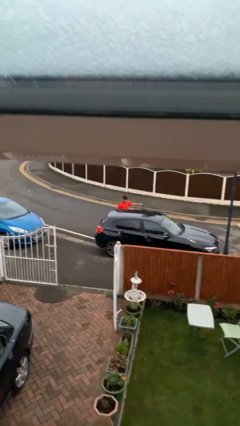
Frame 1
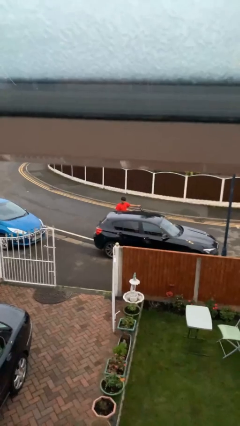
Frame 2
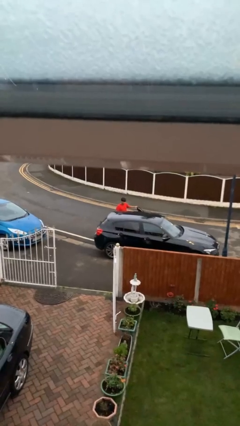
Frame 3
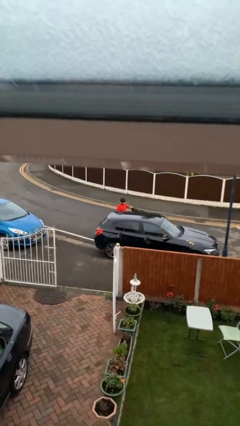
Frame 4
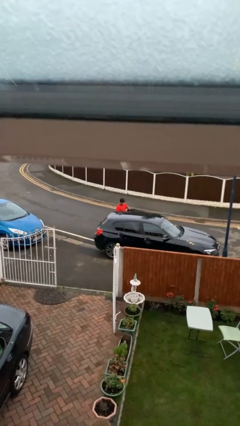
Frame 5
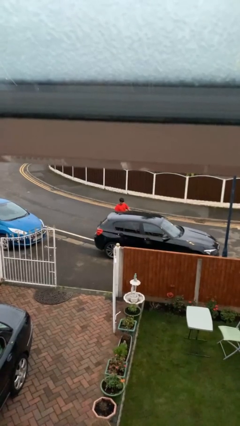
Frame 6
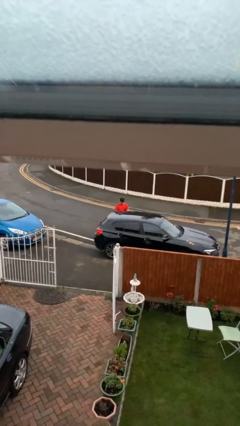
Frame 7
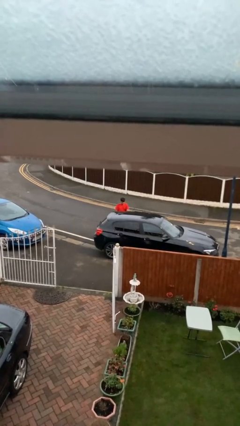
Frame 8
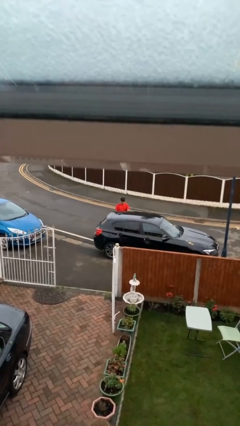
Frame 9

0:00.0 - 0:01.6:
person closes car door

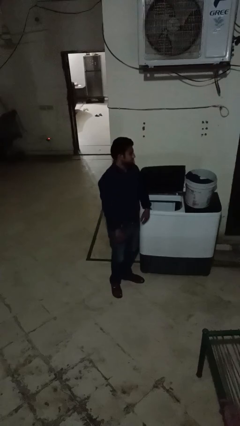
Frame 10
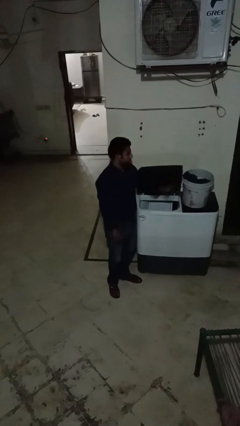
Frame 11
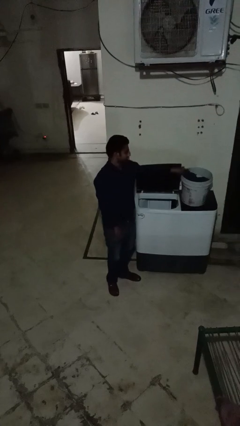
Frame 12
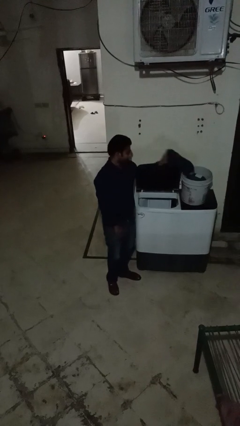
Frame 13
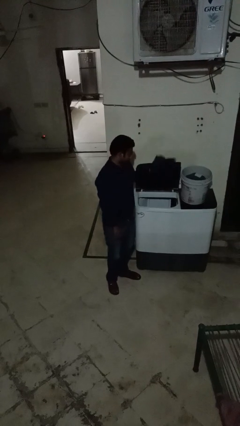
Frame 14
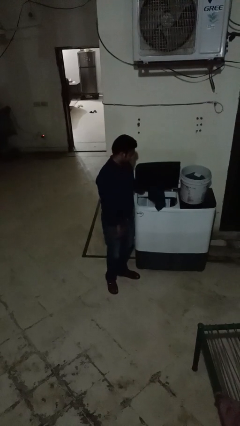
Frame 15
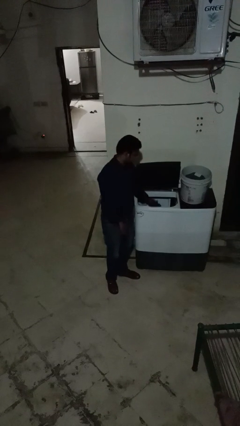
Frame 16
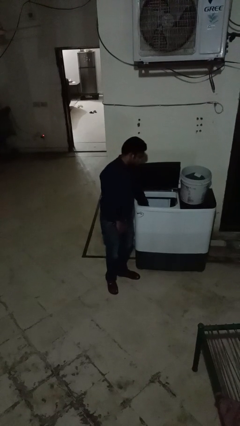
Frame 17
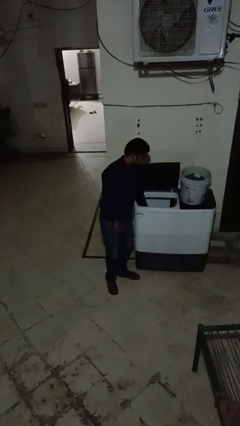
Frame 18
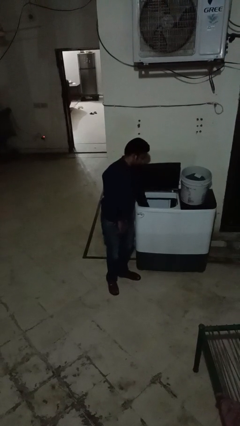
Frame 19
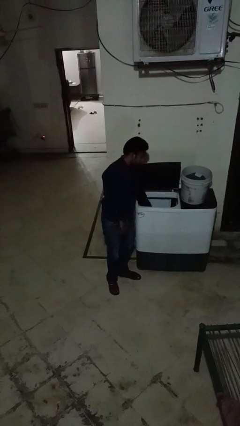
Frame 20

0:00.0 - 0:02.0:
person loads clotheswasher

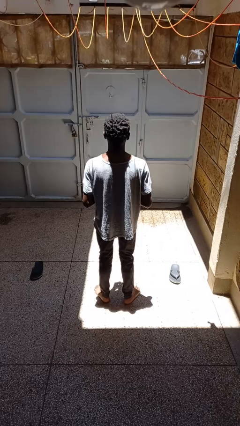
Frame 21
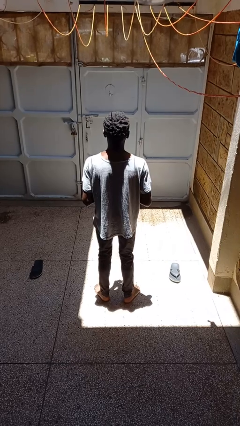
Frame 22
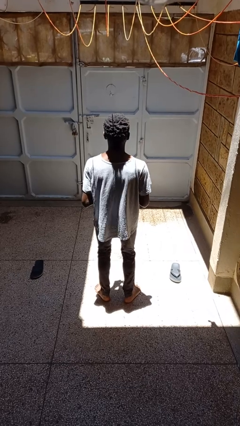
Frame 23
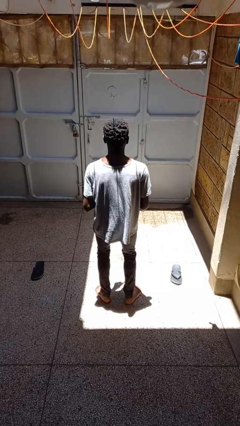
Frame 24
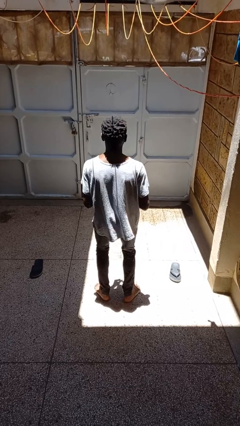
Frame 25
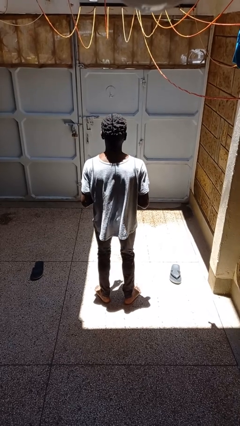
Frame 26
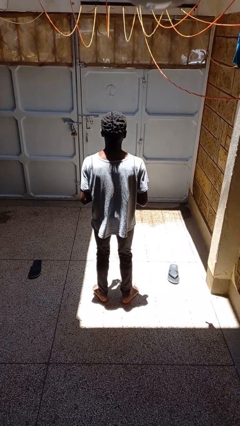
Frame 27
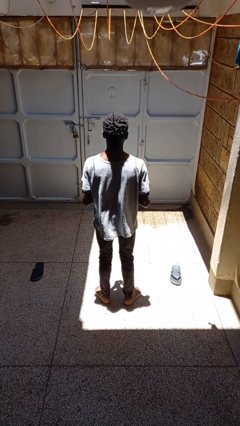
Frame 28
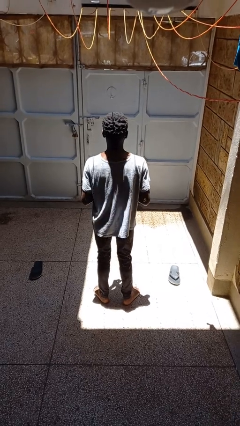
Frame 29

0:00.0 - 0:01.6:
person dances in place

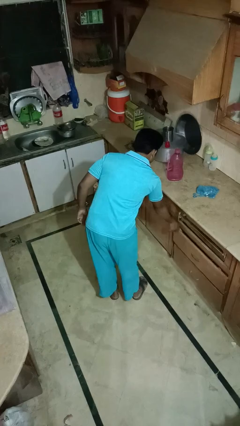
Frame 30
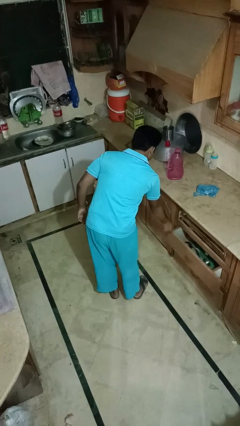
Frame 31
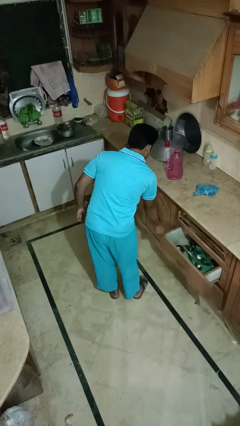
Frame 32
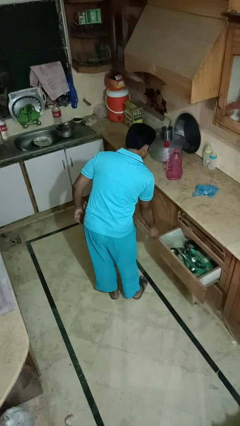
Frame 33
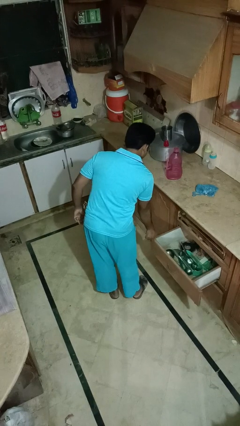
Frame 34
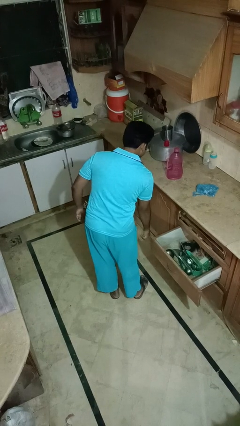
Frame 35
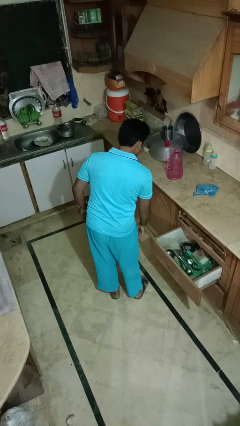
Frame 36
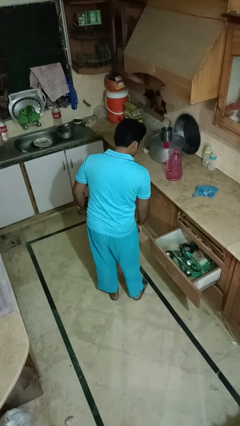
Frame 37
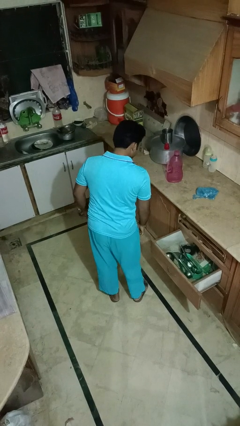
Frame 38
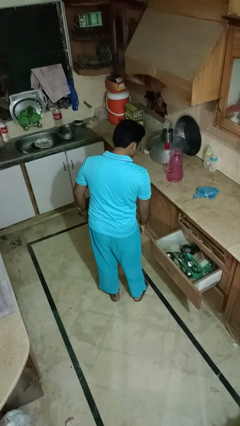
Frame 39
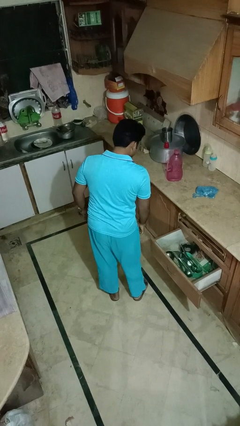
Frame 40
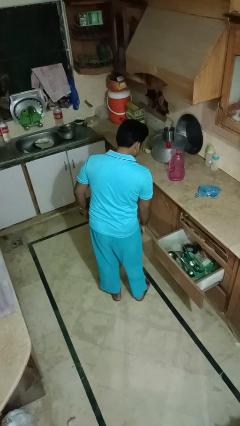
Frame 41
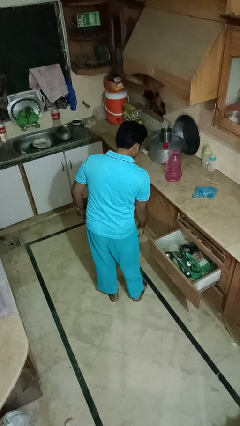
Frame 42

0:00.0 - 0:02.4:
person opens kitchen drawer

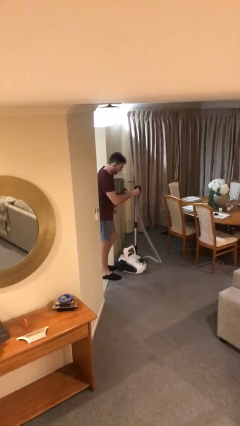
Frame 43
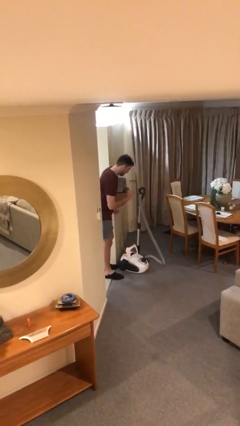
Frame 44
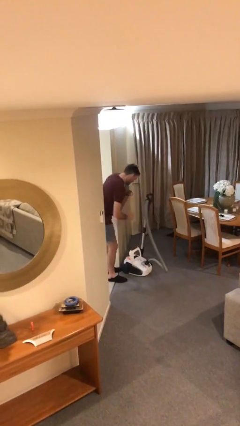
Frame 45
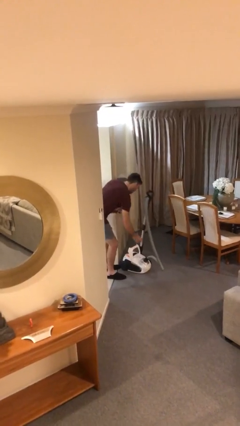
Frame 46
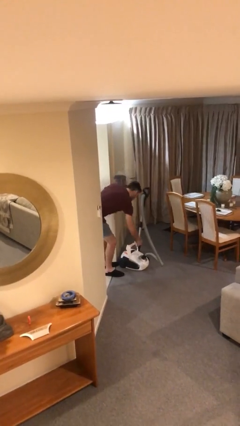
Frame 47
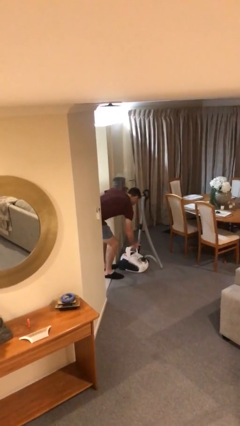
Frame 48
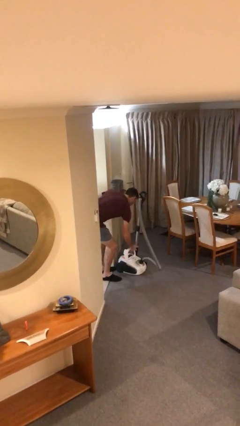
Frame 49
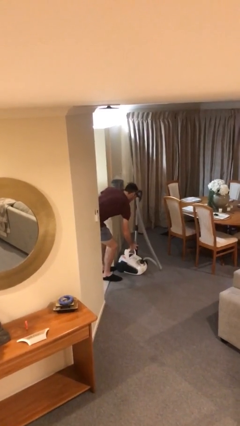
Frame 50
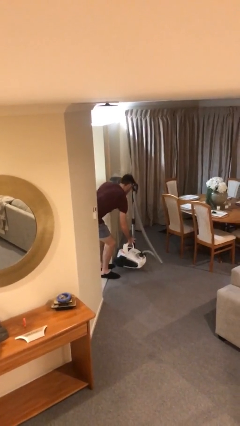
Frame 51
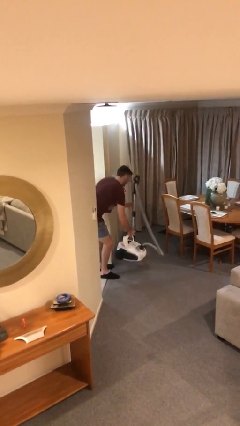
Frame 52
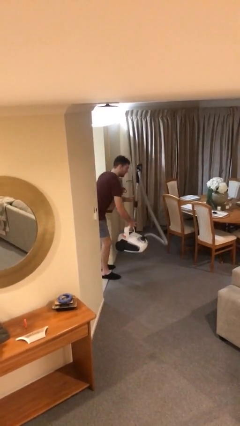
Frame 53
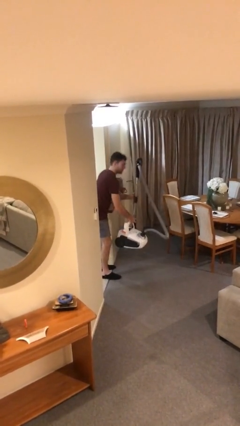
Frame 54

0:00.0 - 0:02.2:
person picks up object from floor

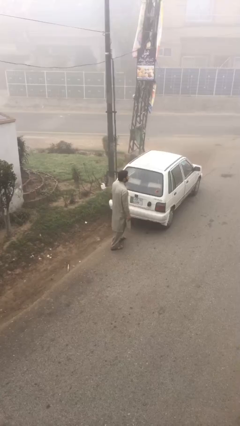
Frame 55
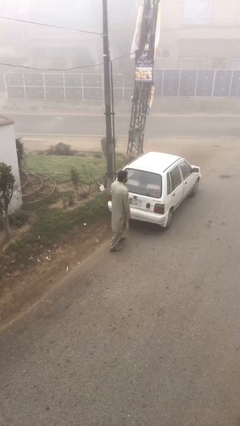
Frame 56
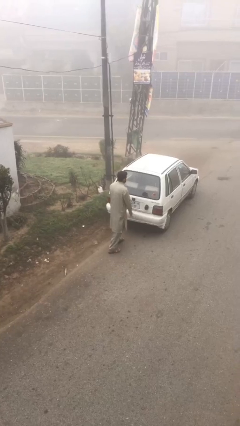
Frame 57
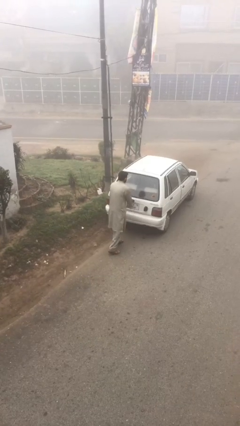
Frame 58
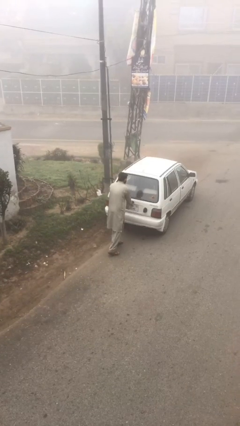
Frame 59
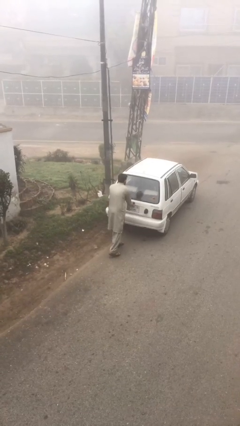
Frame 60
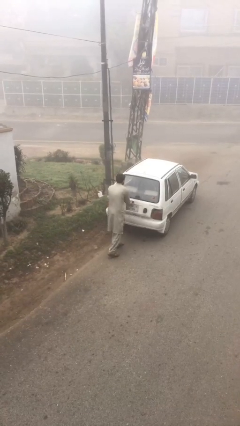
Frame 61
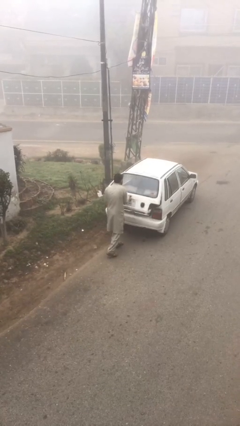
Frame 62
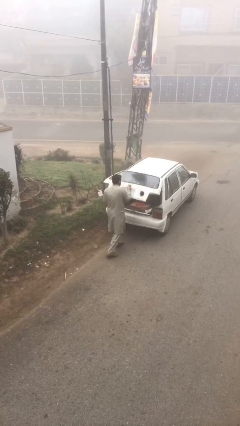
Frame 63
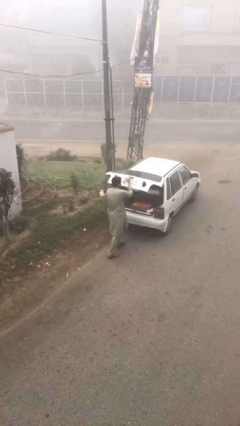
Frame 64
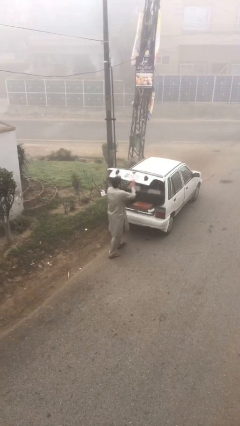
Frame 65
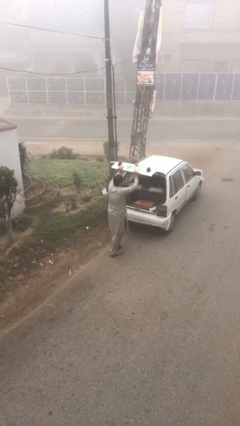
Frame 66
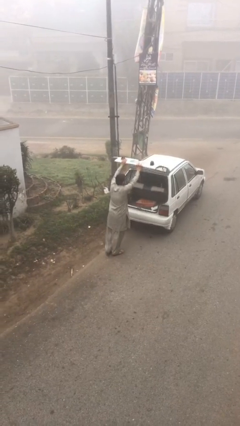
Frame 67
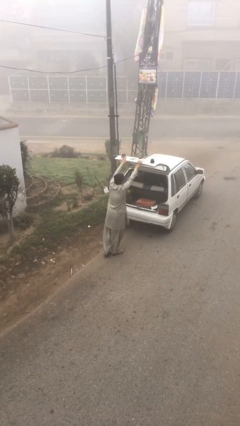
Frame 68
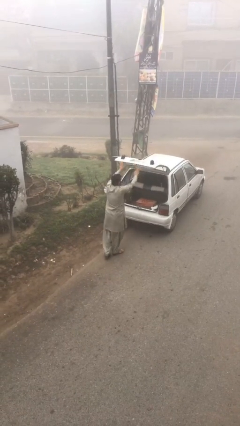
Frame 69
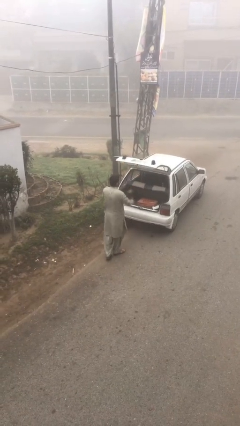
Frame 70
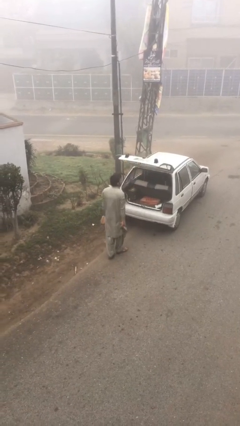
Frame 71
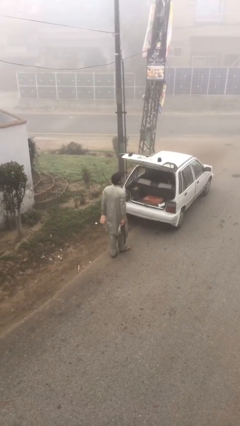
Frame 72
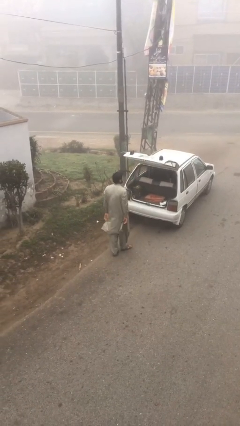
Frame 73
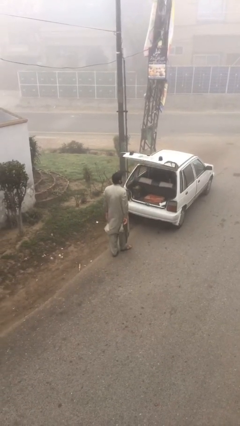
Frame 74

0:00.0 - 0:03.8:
person opens car trunk

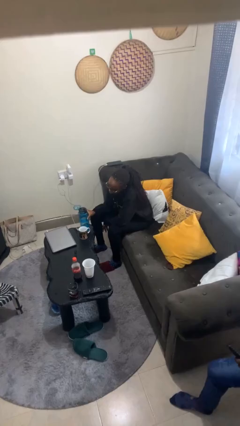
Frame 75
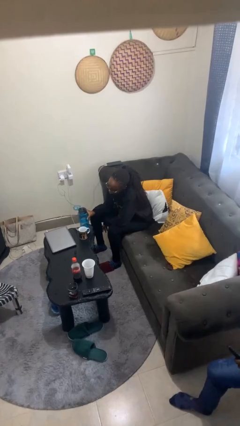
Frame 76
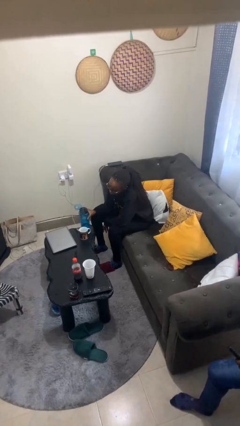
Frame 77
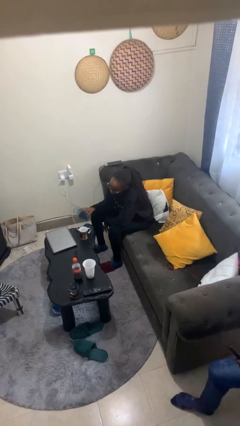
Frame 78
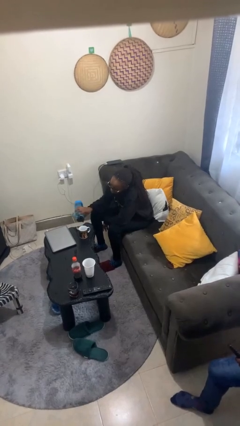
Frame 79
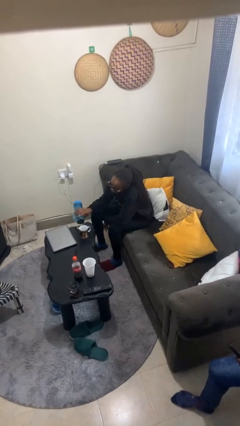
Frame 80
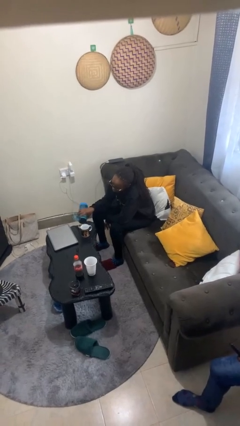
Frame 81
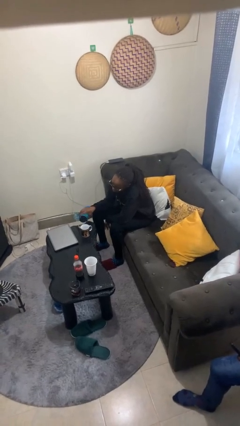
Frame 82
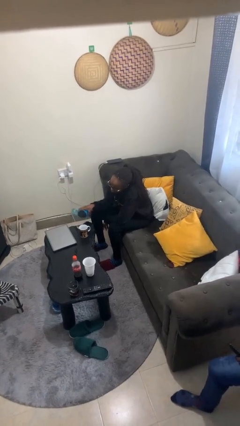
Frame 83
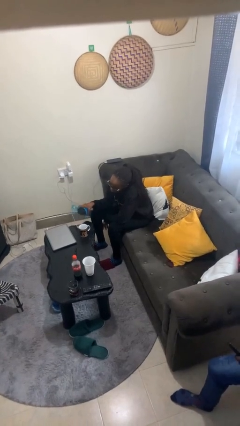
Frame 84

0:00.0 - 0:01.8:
person pours liquid into cup

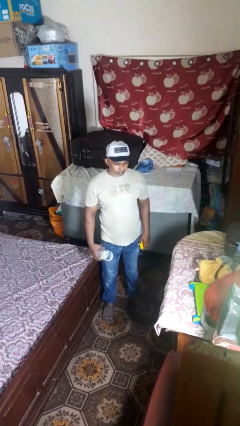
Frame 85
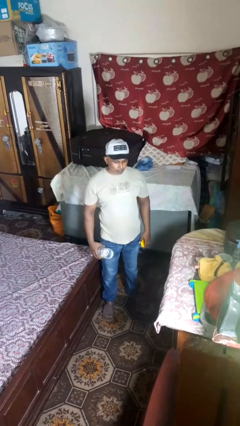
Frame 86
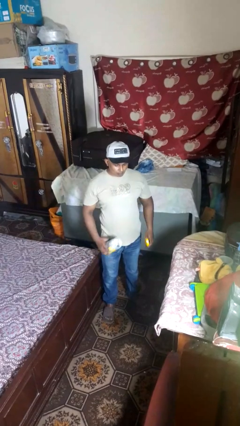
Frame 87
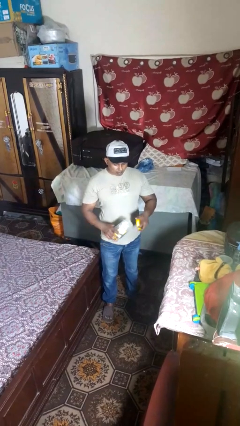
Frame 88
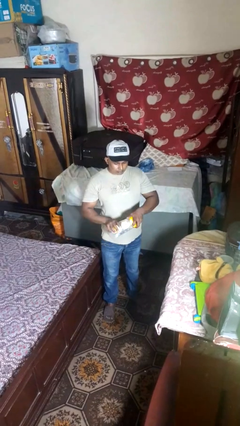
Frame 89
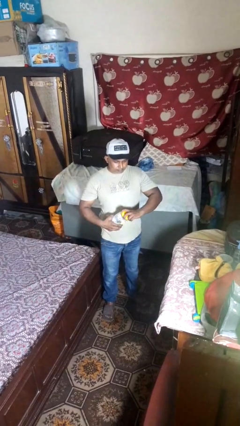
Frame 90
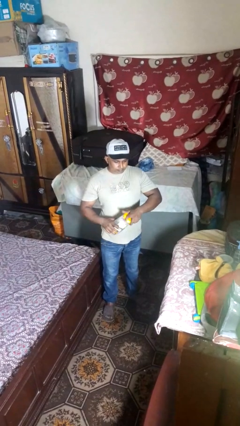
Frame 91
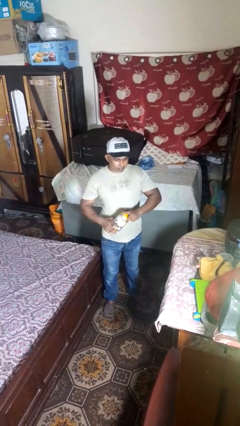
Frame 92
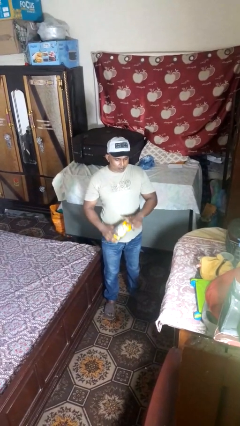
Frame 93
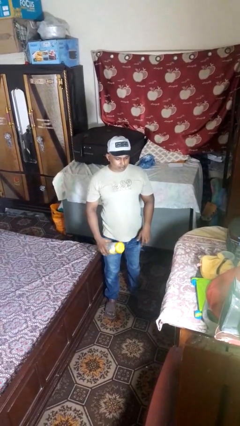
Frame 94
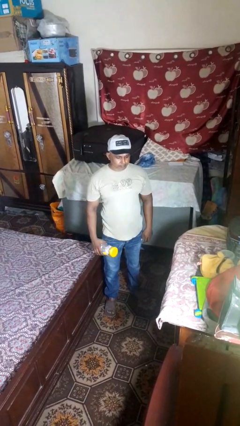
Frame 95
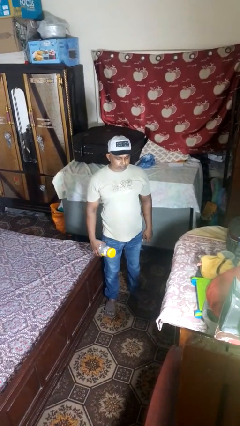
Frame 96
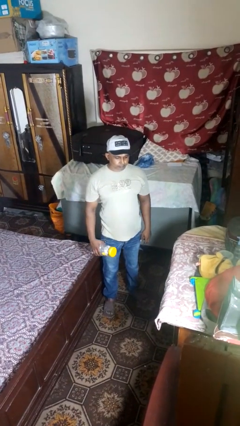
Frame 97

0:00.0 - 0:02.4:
person closes jar
